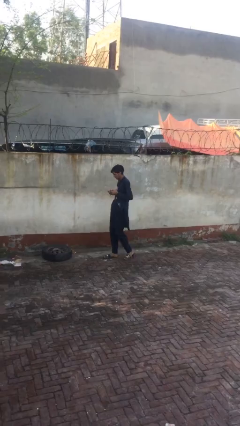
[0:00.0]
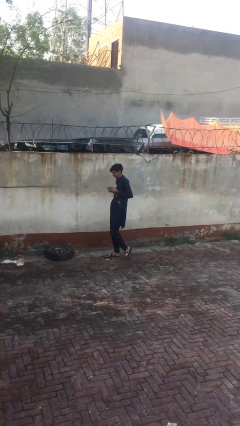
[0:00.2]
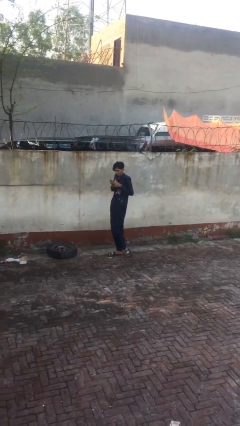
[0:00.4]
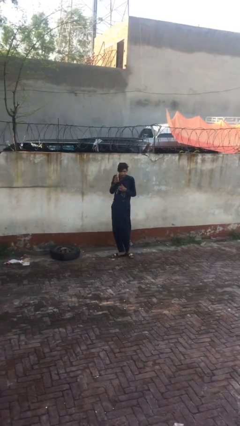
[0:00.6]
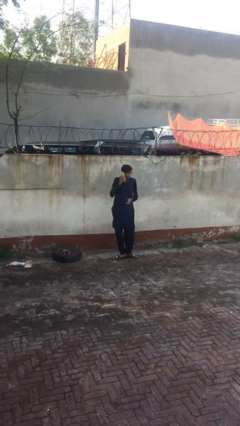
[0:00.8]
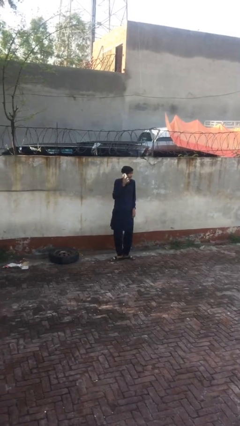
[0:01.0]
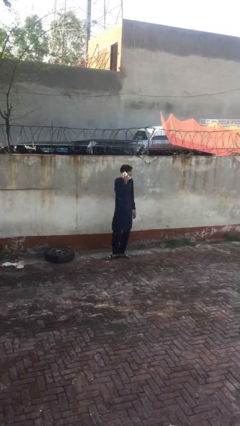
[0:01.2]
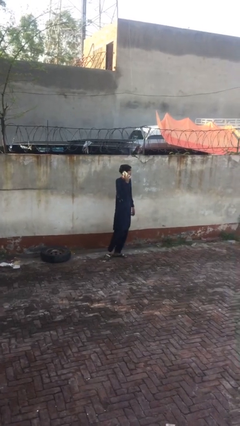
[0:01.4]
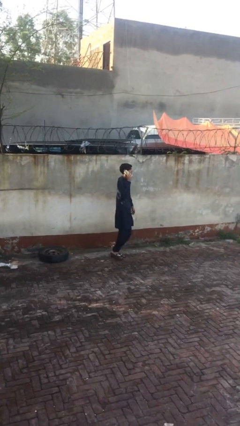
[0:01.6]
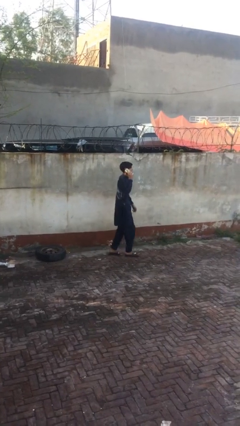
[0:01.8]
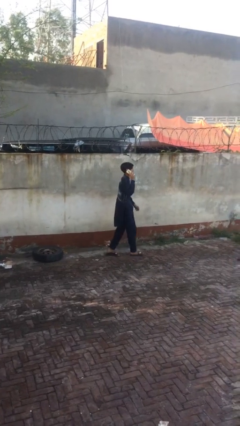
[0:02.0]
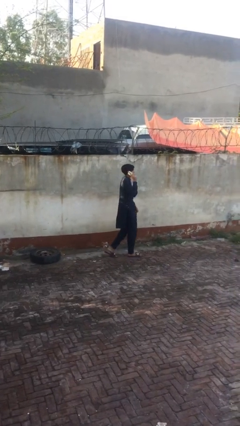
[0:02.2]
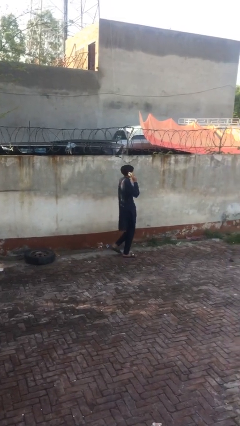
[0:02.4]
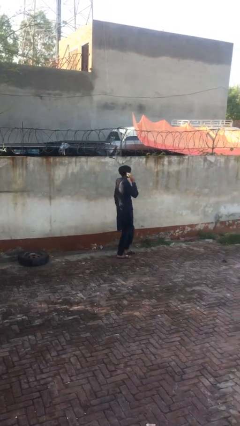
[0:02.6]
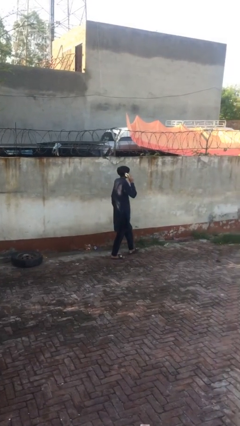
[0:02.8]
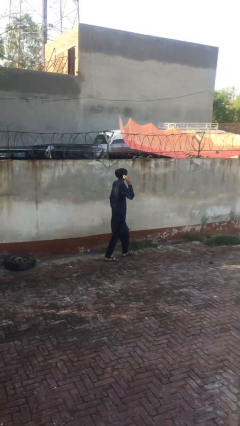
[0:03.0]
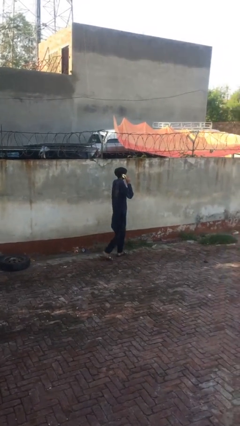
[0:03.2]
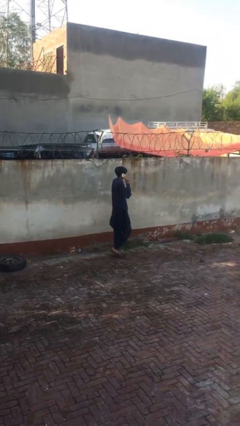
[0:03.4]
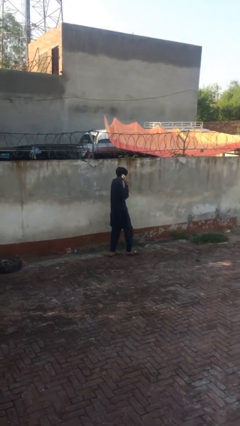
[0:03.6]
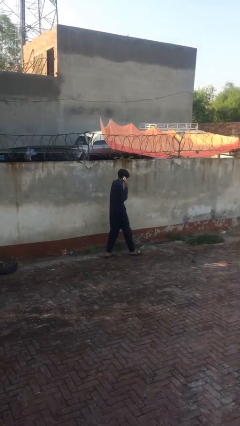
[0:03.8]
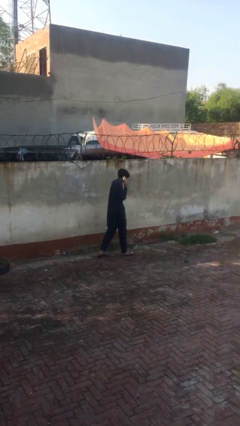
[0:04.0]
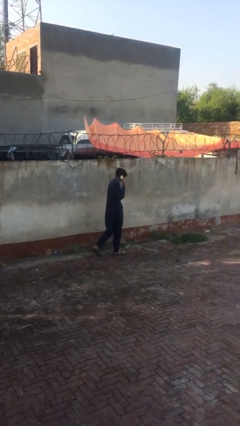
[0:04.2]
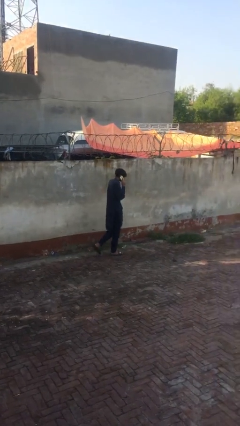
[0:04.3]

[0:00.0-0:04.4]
person talks on phone

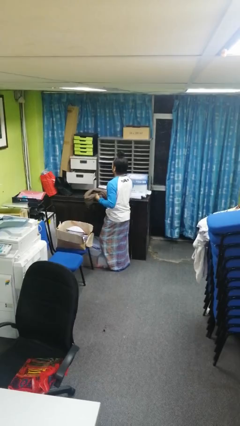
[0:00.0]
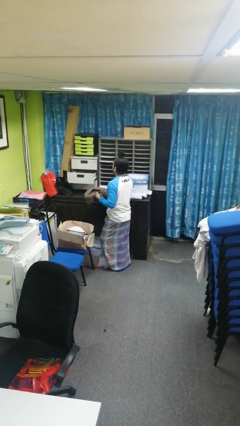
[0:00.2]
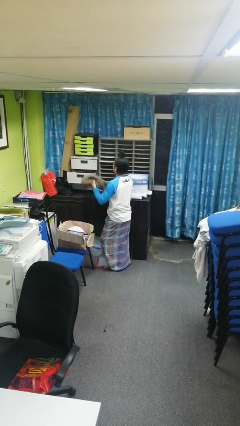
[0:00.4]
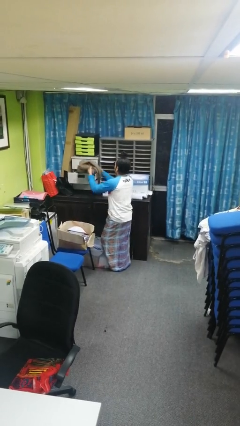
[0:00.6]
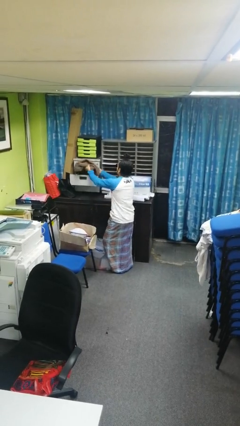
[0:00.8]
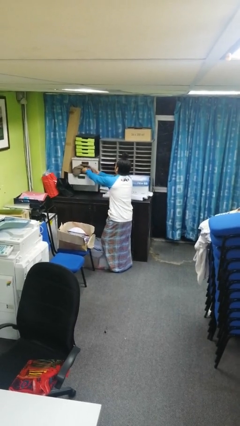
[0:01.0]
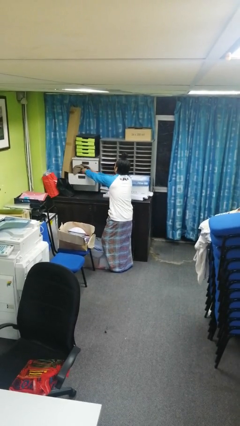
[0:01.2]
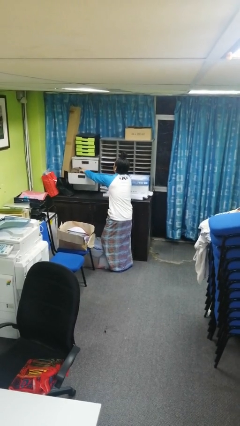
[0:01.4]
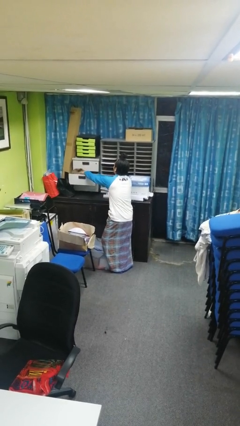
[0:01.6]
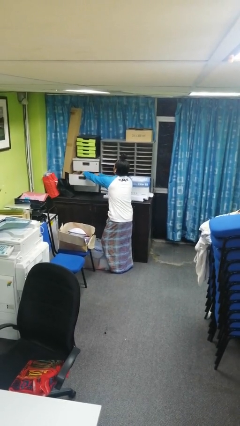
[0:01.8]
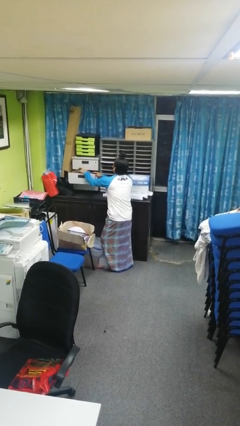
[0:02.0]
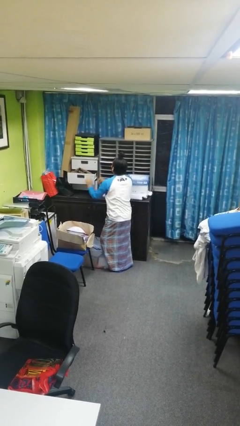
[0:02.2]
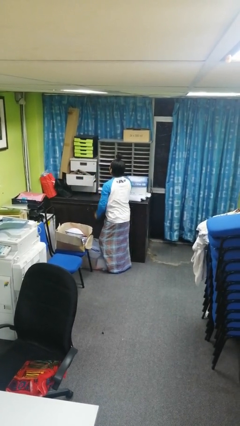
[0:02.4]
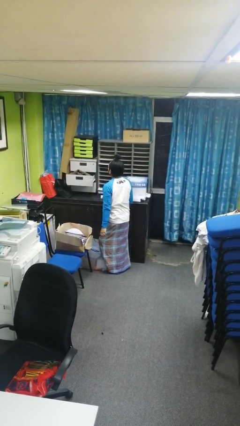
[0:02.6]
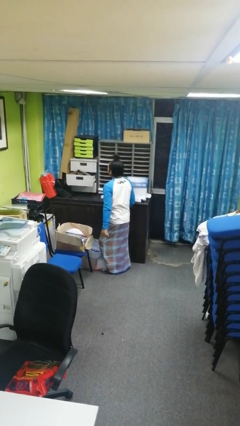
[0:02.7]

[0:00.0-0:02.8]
person puts clothes into dresser

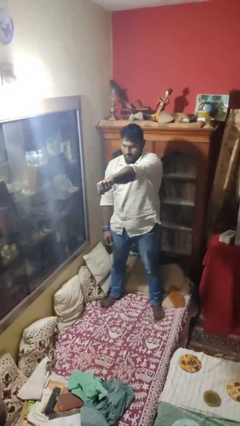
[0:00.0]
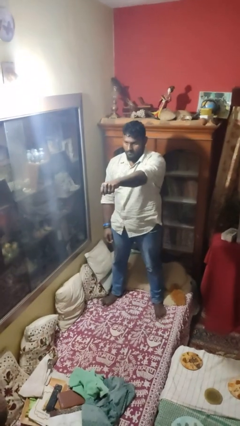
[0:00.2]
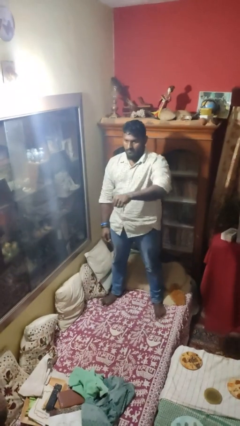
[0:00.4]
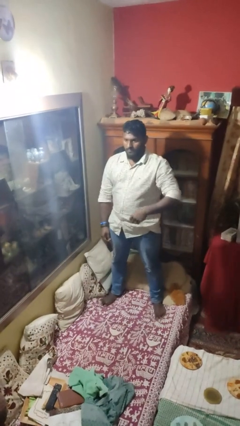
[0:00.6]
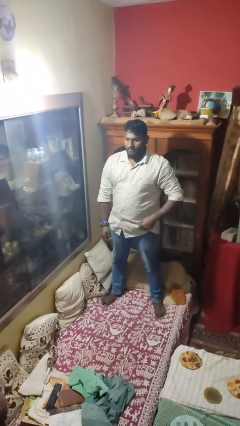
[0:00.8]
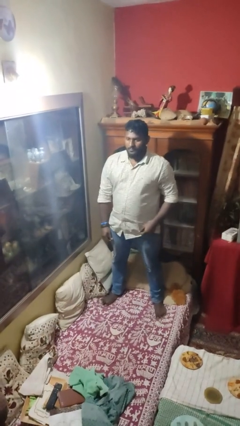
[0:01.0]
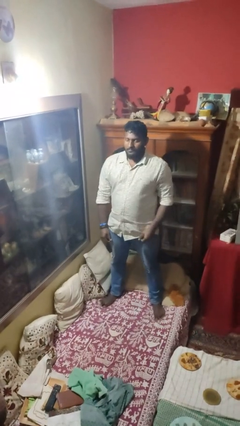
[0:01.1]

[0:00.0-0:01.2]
person punches

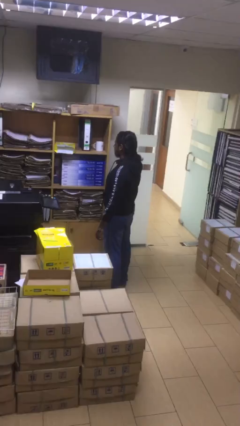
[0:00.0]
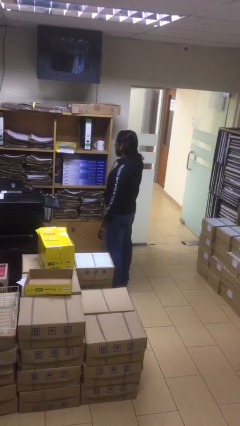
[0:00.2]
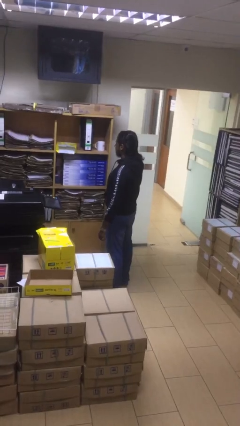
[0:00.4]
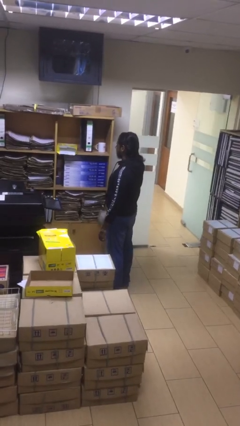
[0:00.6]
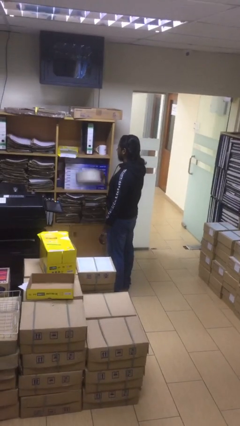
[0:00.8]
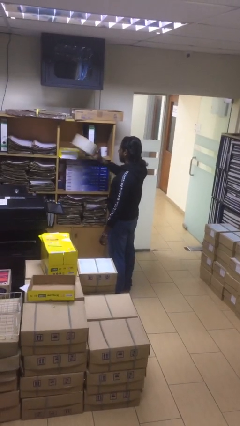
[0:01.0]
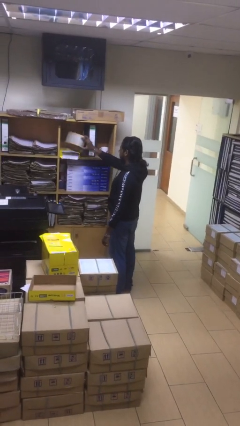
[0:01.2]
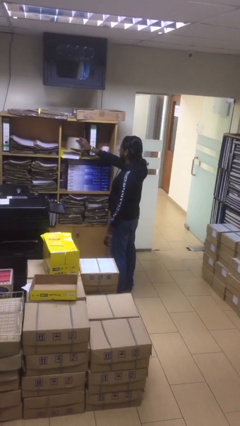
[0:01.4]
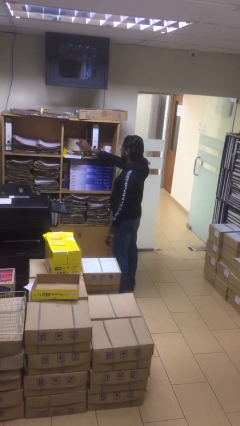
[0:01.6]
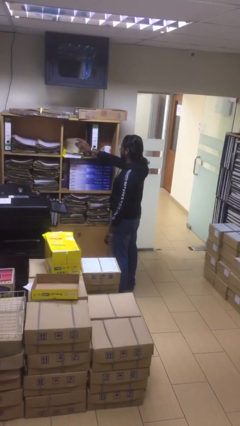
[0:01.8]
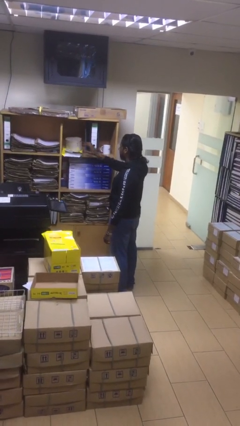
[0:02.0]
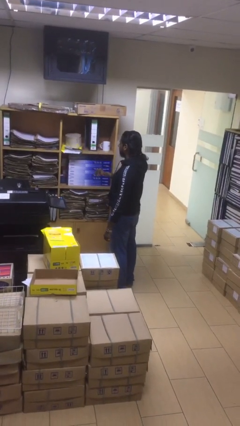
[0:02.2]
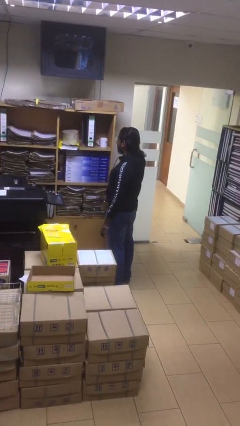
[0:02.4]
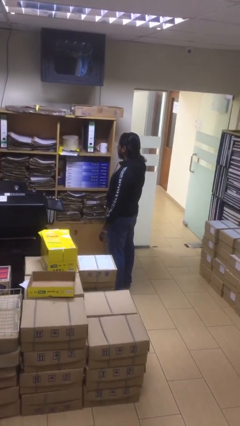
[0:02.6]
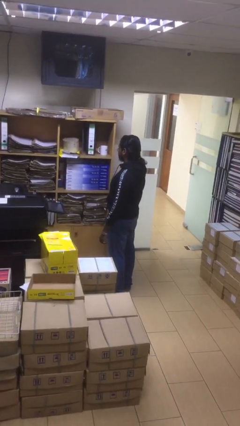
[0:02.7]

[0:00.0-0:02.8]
person puts down object into cabinet

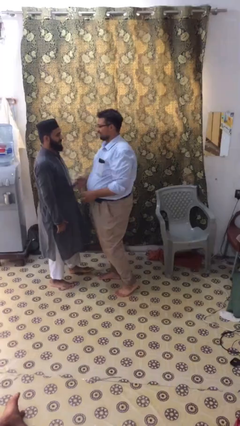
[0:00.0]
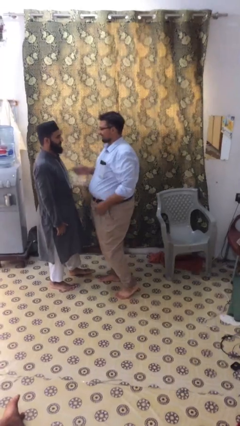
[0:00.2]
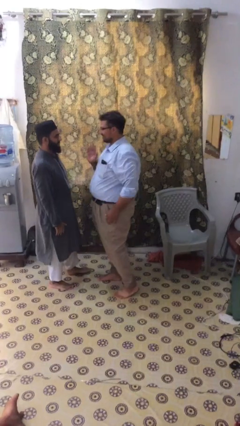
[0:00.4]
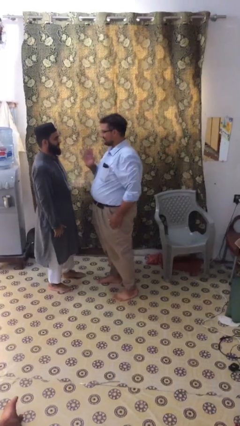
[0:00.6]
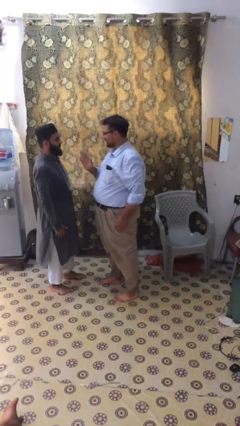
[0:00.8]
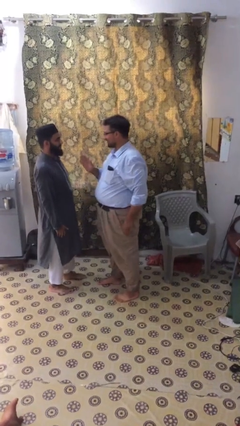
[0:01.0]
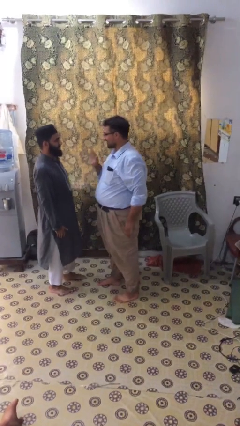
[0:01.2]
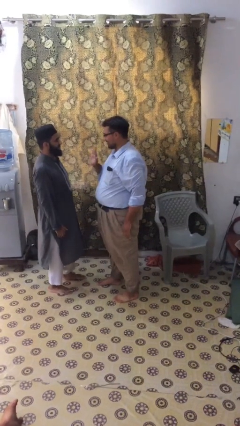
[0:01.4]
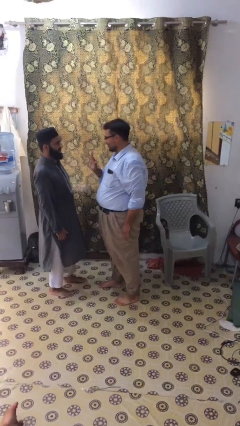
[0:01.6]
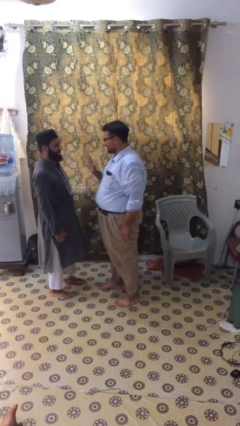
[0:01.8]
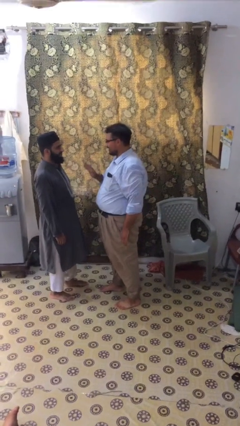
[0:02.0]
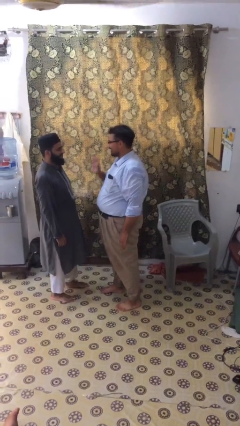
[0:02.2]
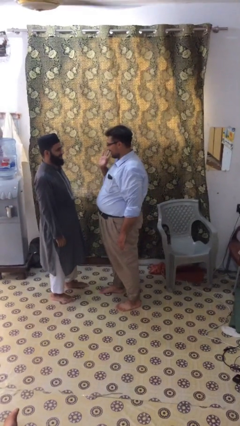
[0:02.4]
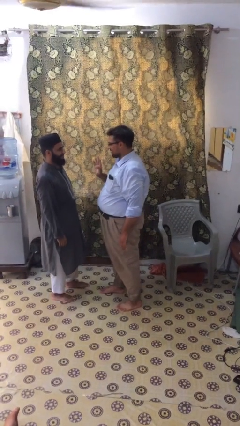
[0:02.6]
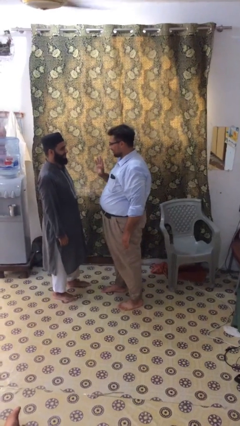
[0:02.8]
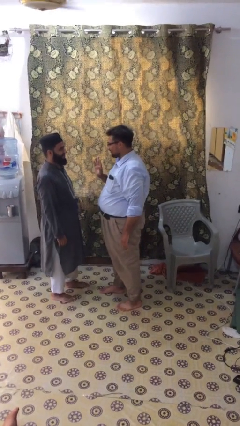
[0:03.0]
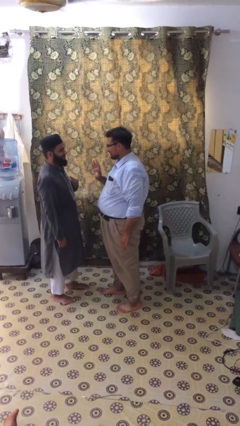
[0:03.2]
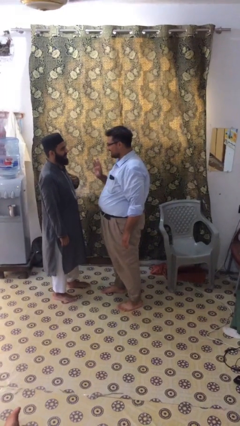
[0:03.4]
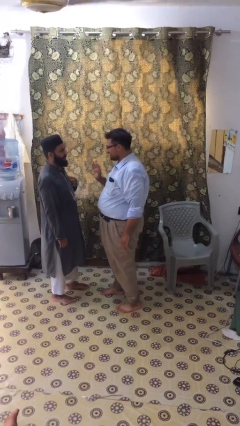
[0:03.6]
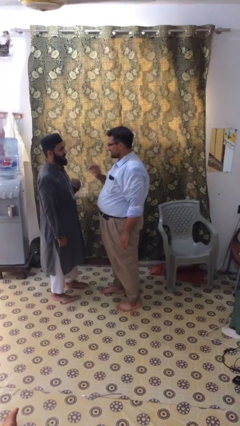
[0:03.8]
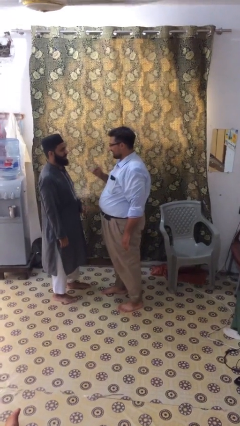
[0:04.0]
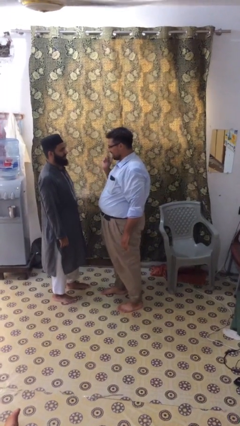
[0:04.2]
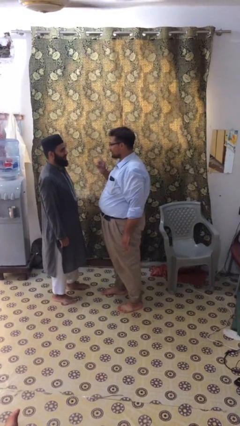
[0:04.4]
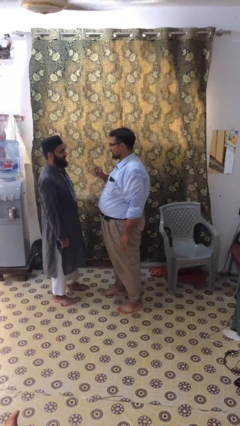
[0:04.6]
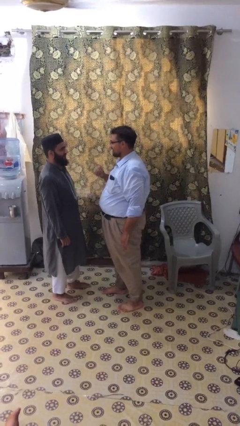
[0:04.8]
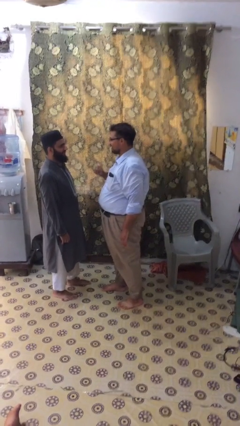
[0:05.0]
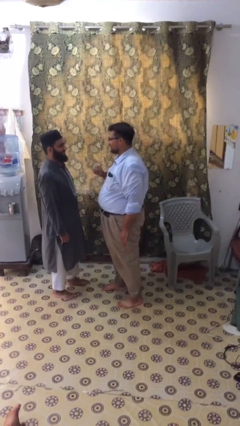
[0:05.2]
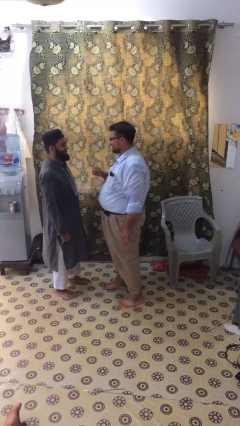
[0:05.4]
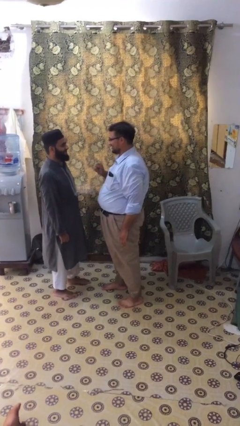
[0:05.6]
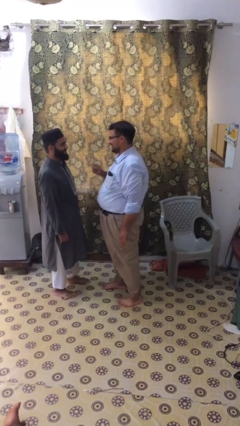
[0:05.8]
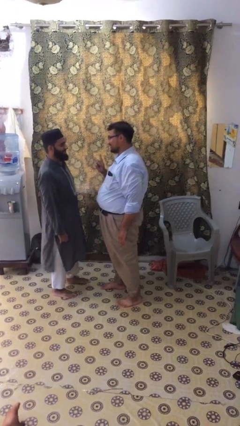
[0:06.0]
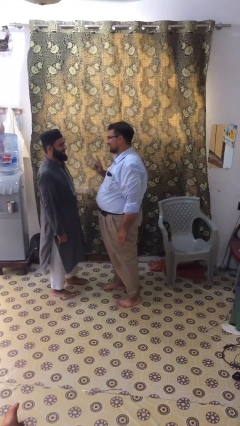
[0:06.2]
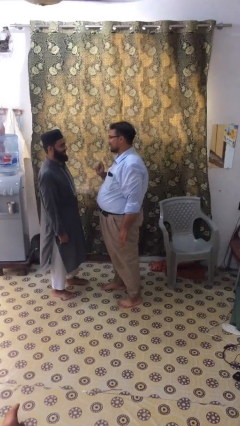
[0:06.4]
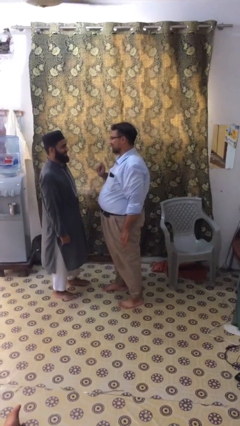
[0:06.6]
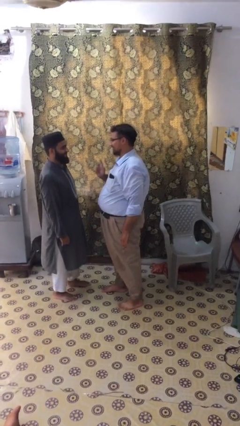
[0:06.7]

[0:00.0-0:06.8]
person talks to person
